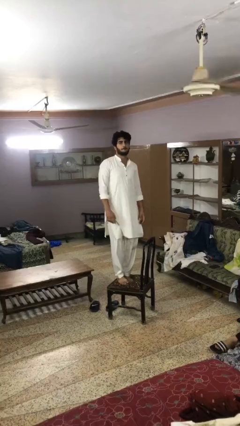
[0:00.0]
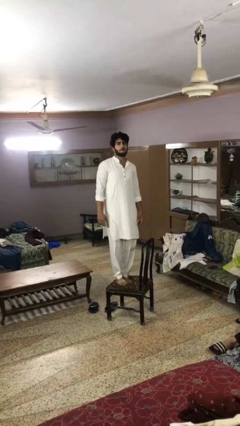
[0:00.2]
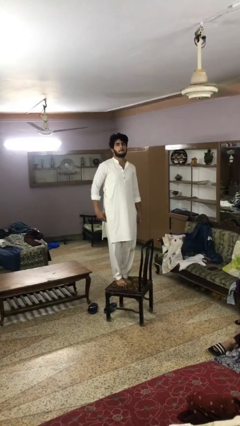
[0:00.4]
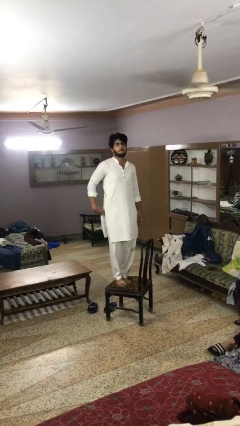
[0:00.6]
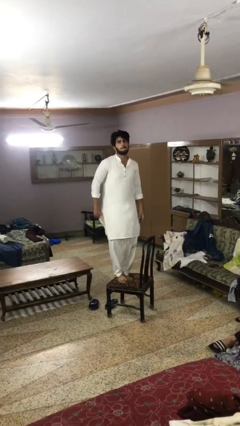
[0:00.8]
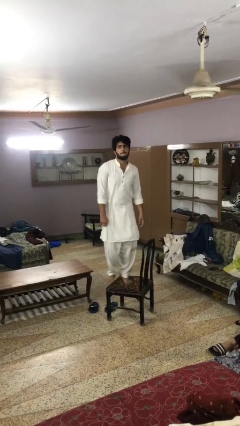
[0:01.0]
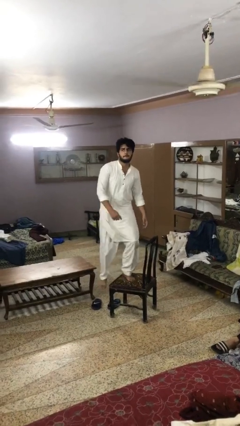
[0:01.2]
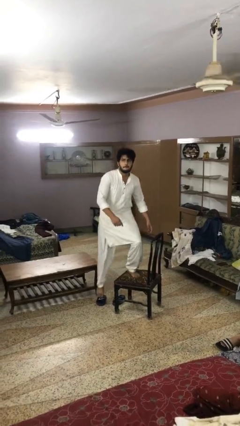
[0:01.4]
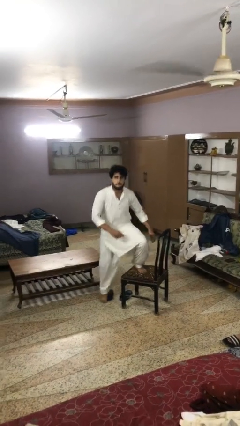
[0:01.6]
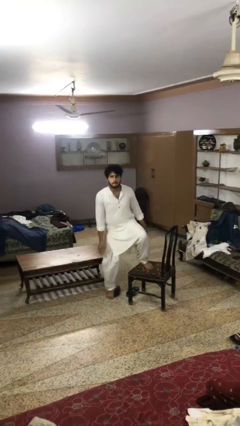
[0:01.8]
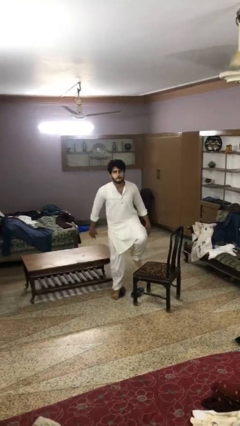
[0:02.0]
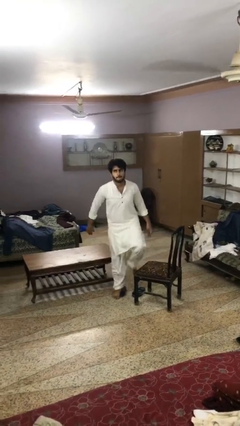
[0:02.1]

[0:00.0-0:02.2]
person climbs off chair

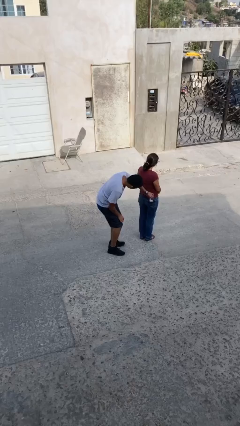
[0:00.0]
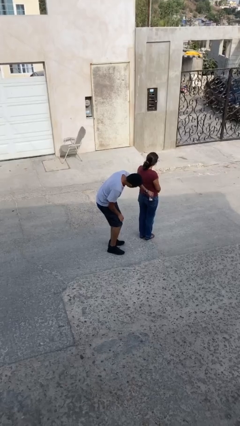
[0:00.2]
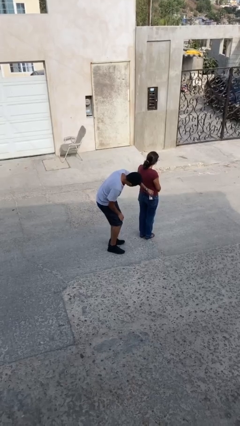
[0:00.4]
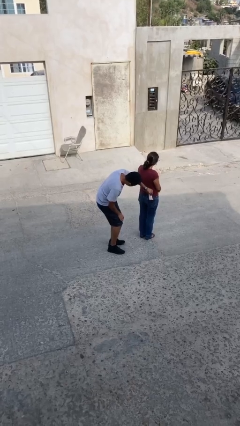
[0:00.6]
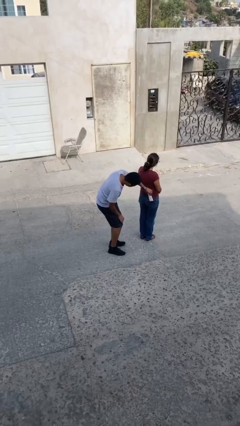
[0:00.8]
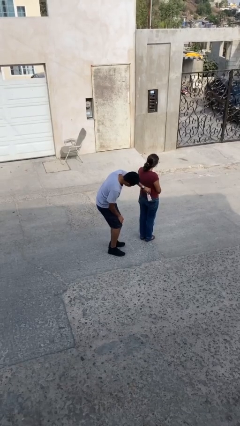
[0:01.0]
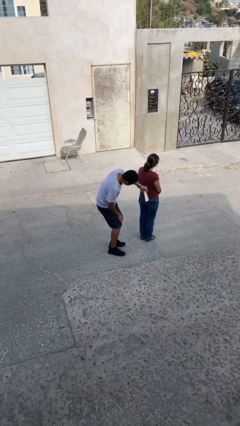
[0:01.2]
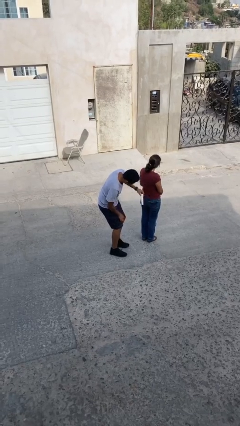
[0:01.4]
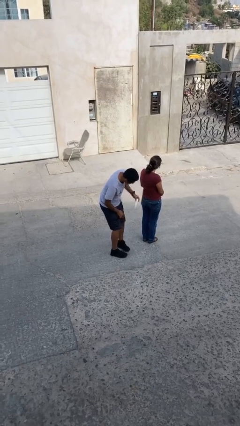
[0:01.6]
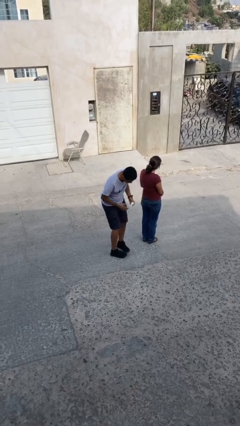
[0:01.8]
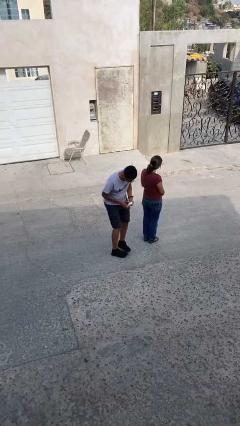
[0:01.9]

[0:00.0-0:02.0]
person steals object from person

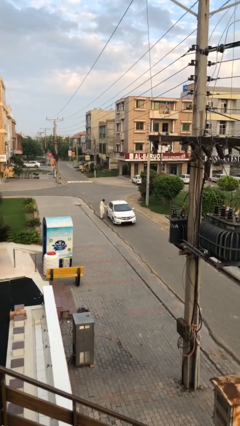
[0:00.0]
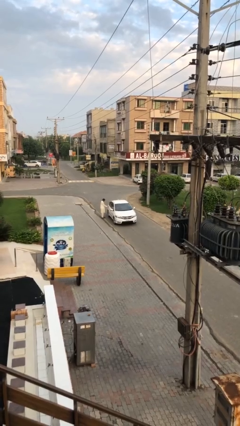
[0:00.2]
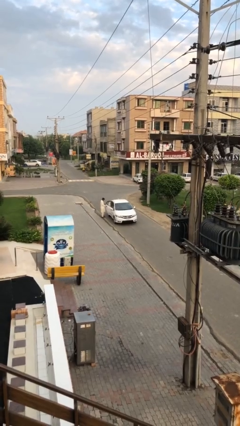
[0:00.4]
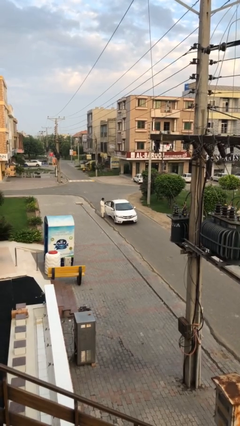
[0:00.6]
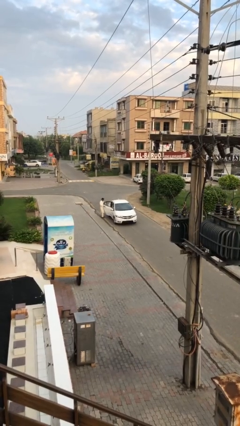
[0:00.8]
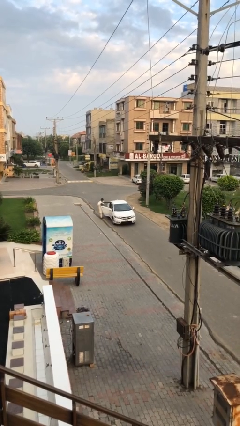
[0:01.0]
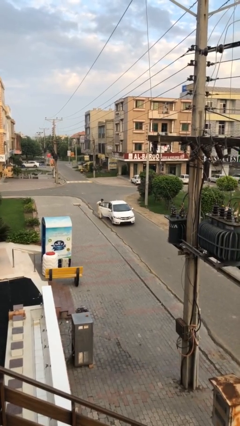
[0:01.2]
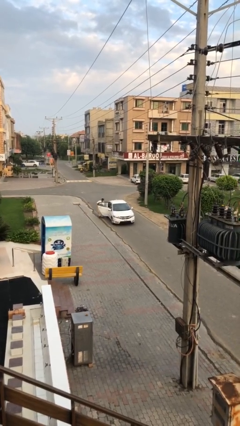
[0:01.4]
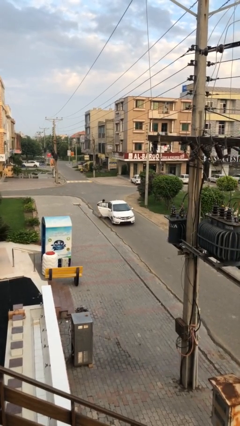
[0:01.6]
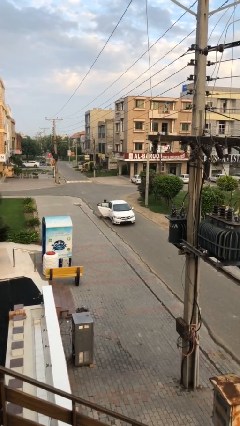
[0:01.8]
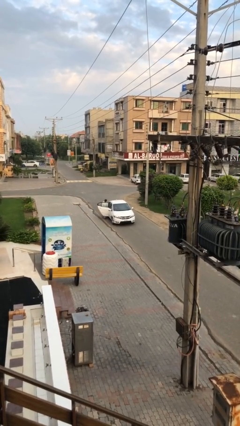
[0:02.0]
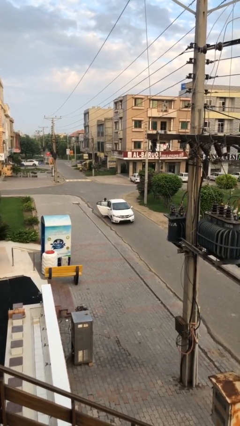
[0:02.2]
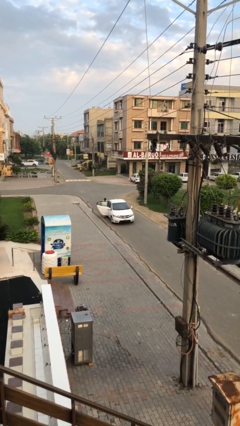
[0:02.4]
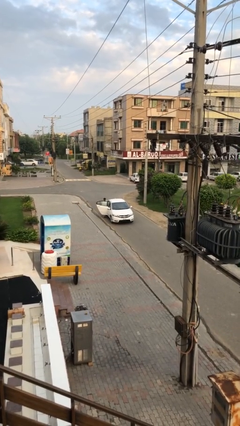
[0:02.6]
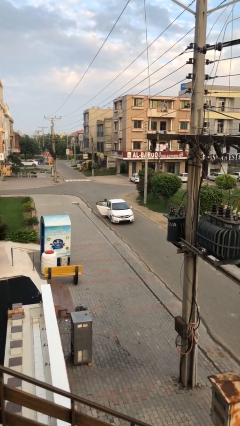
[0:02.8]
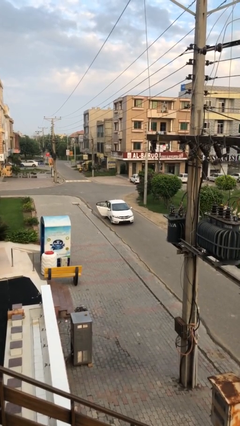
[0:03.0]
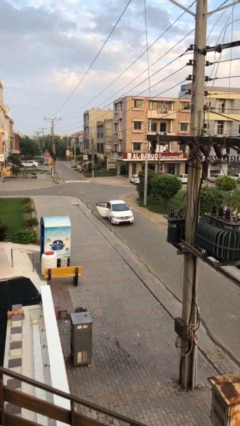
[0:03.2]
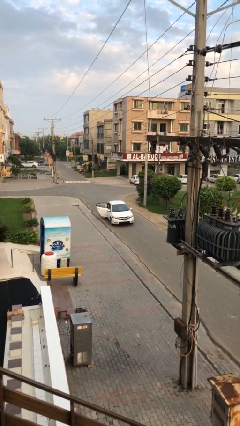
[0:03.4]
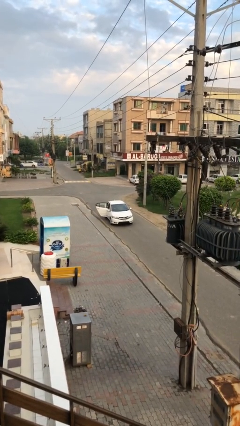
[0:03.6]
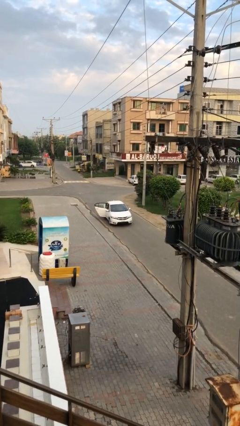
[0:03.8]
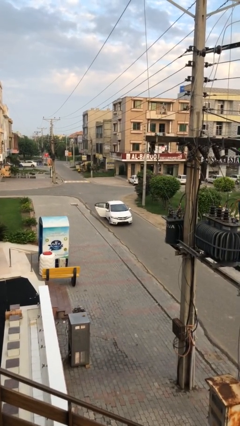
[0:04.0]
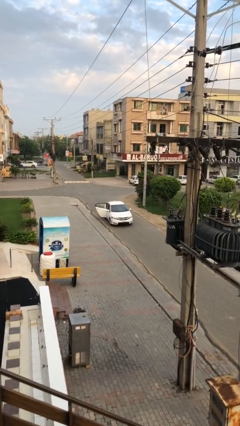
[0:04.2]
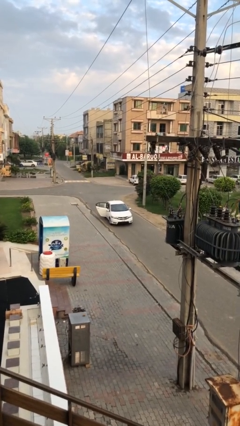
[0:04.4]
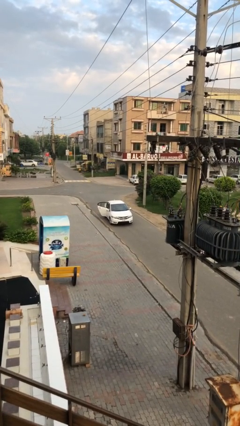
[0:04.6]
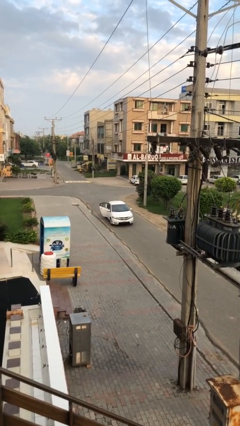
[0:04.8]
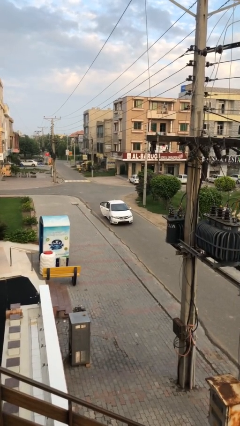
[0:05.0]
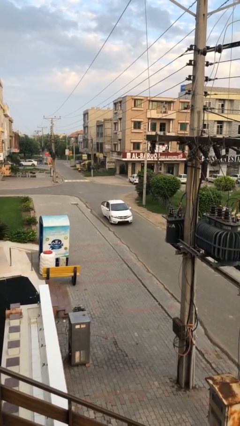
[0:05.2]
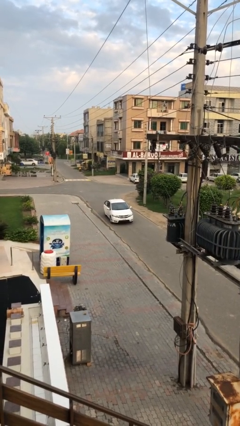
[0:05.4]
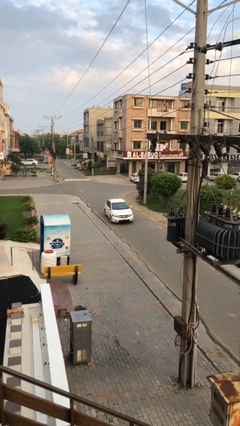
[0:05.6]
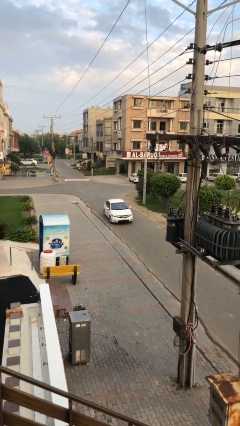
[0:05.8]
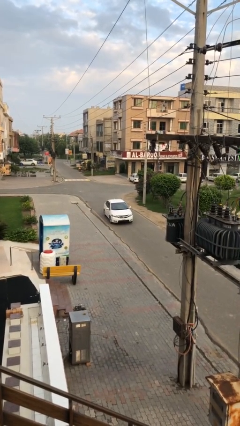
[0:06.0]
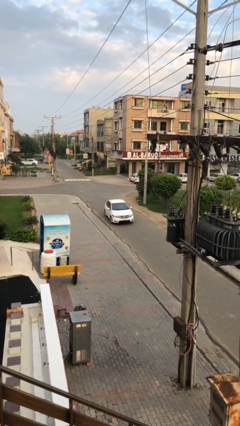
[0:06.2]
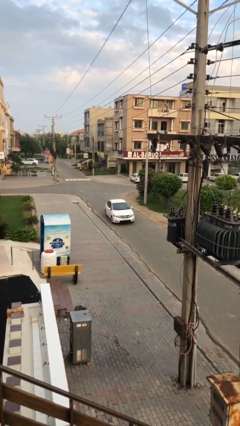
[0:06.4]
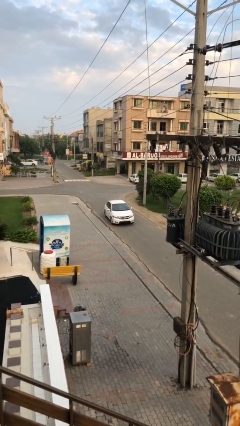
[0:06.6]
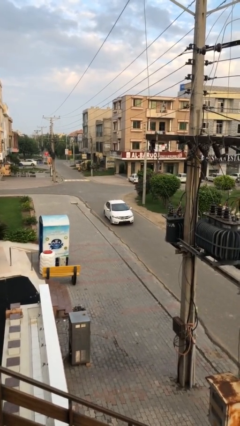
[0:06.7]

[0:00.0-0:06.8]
car picks up person

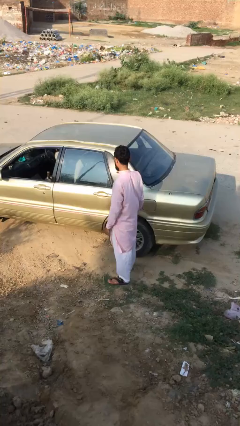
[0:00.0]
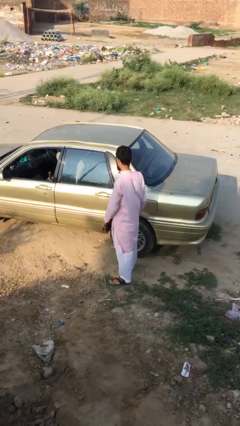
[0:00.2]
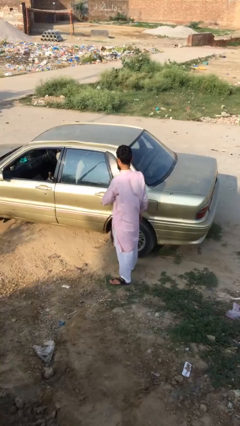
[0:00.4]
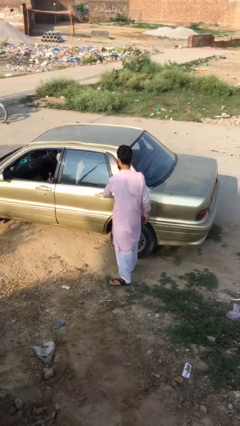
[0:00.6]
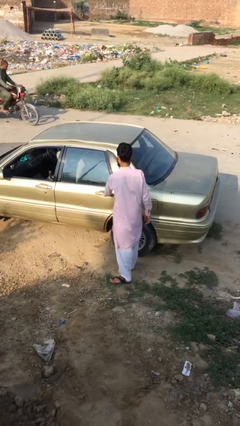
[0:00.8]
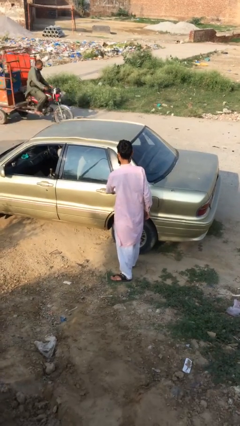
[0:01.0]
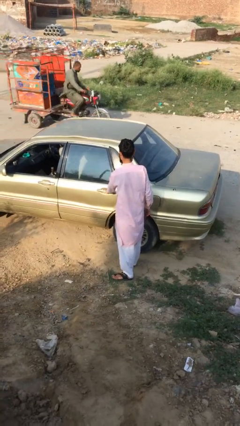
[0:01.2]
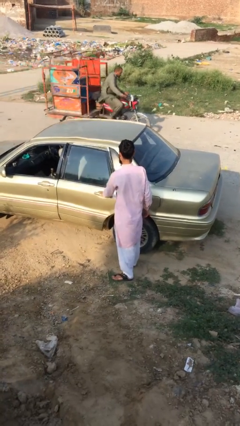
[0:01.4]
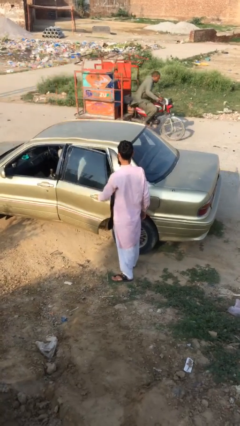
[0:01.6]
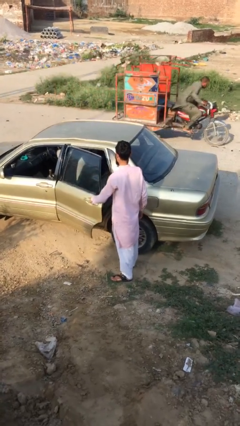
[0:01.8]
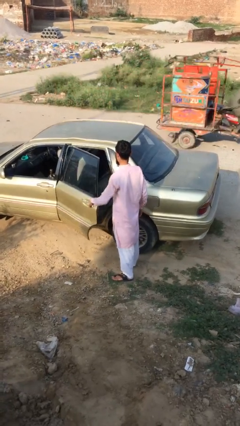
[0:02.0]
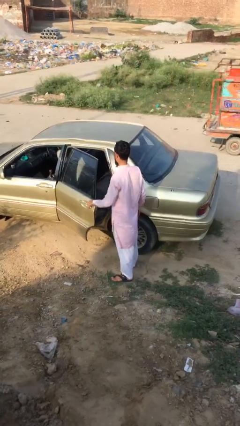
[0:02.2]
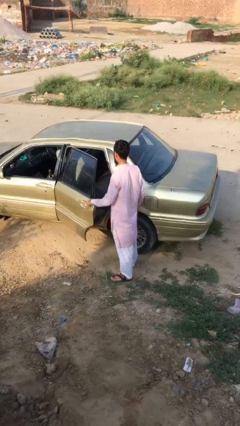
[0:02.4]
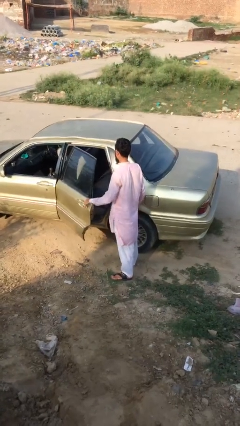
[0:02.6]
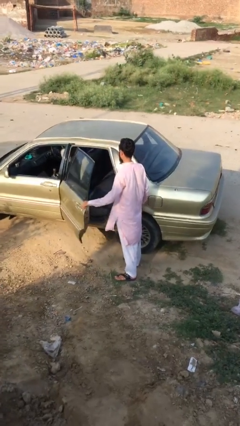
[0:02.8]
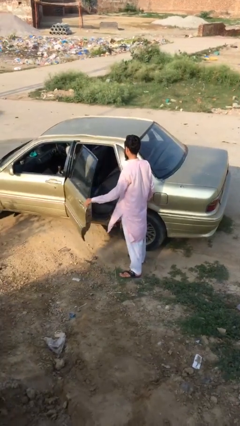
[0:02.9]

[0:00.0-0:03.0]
person opens car door

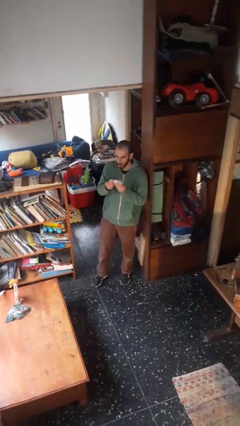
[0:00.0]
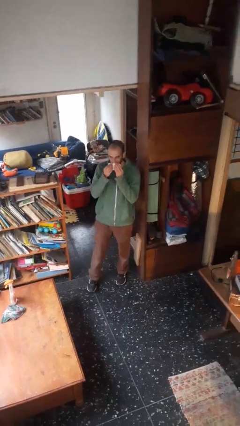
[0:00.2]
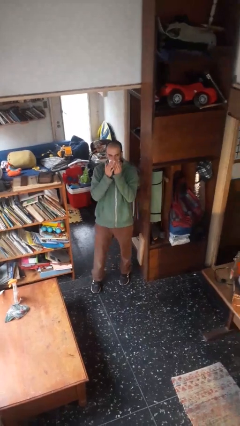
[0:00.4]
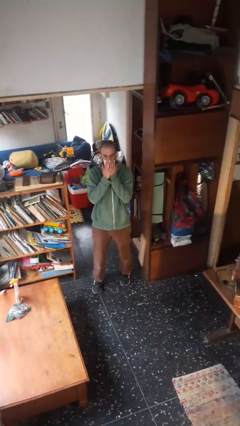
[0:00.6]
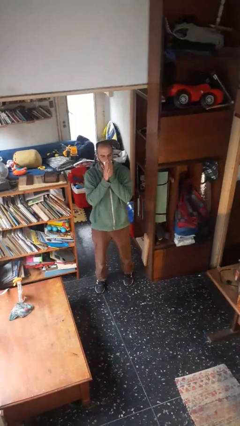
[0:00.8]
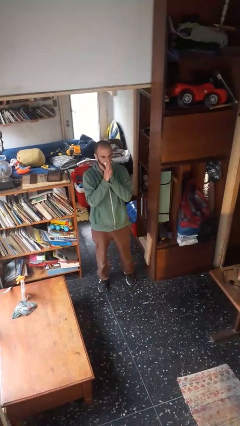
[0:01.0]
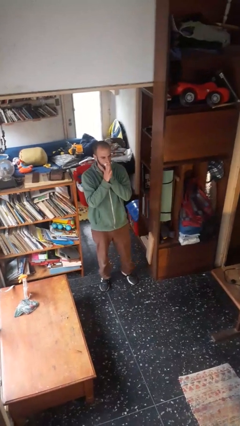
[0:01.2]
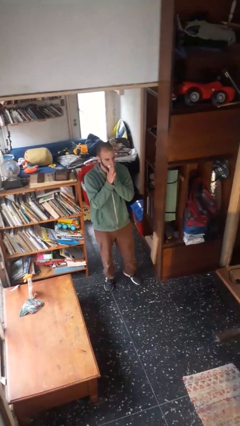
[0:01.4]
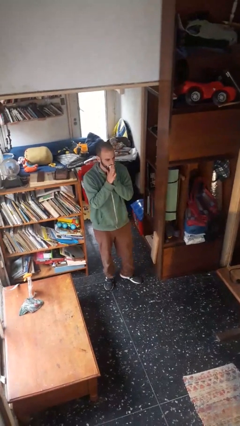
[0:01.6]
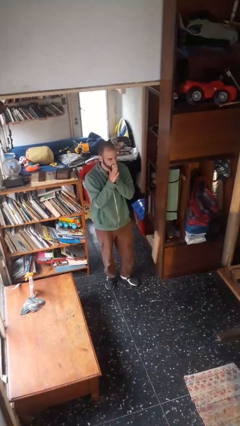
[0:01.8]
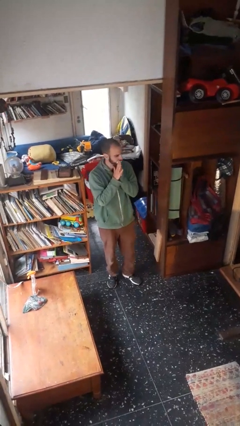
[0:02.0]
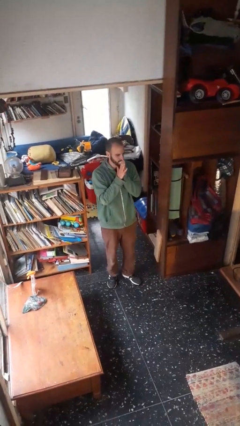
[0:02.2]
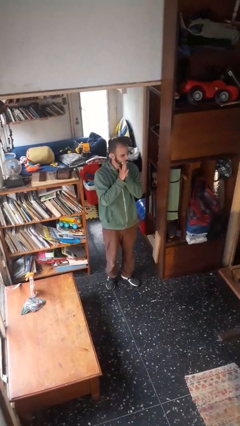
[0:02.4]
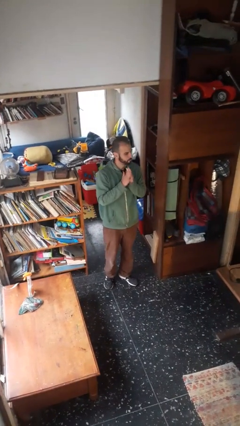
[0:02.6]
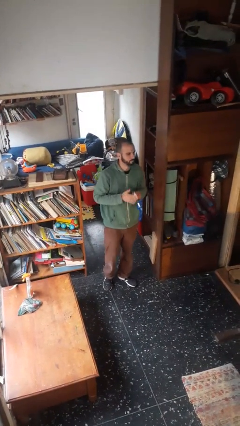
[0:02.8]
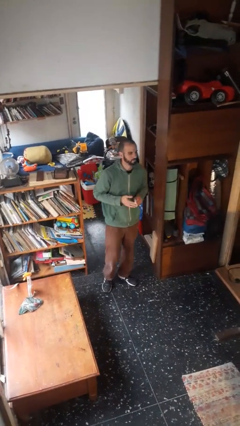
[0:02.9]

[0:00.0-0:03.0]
person wipes mouth with napkin

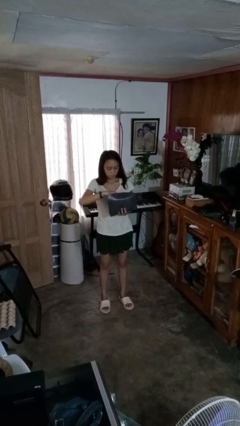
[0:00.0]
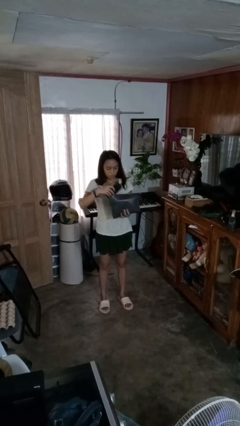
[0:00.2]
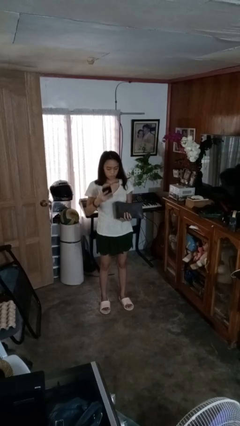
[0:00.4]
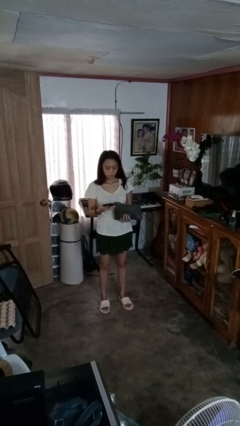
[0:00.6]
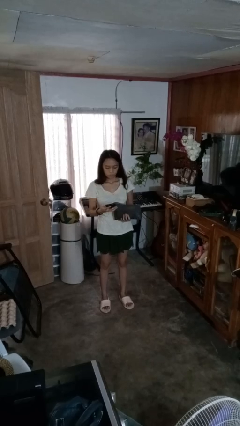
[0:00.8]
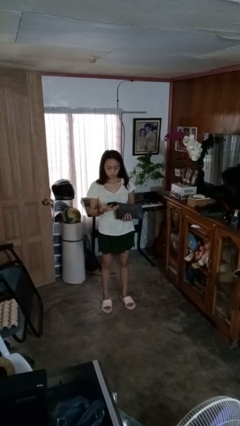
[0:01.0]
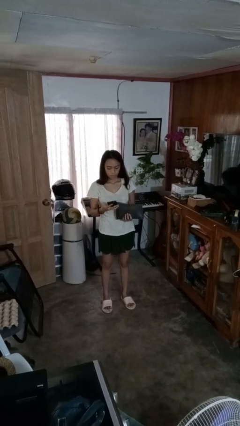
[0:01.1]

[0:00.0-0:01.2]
person takes object from purse
